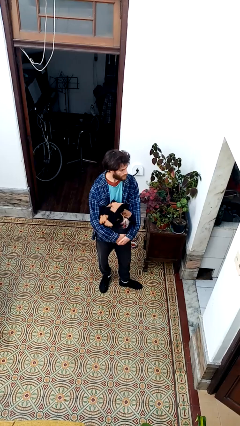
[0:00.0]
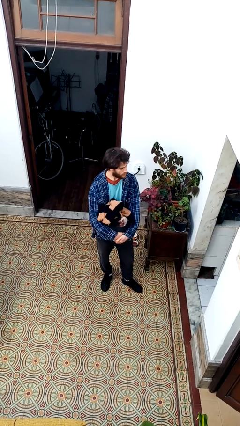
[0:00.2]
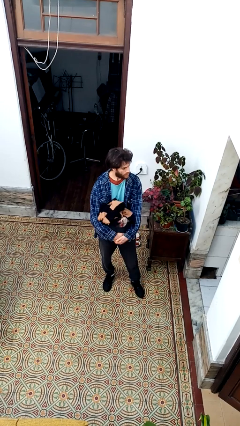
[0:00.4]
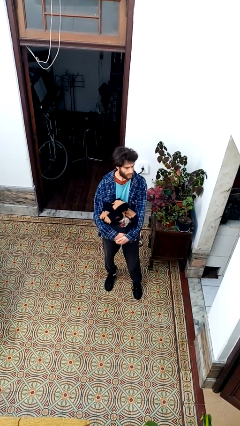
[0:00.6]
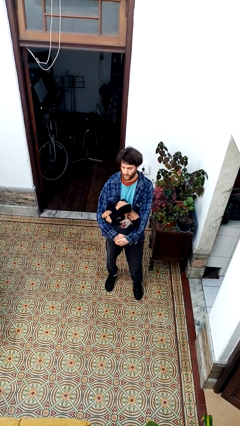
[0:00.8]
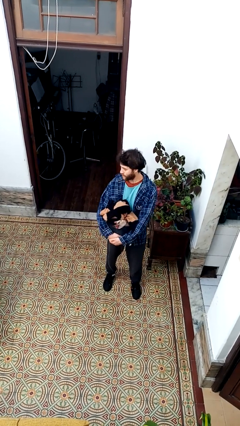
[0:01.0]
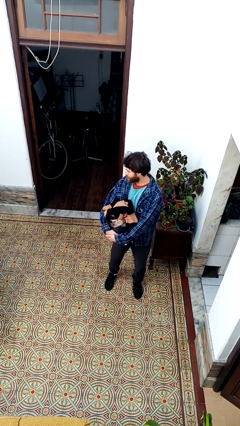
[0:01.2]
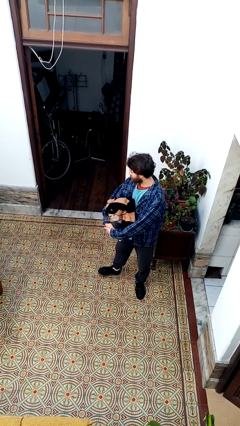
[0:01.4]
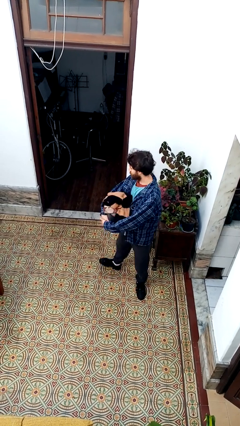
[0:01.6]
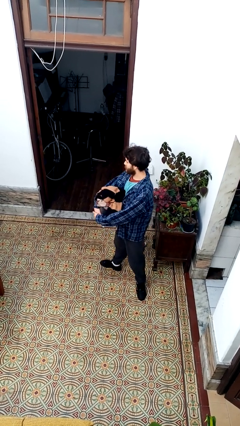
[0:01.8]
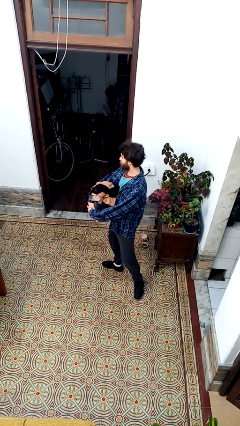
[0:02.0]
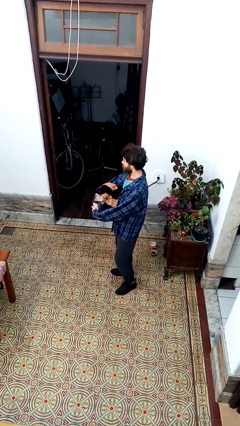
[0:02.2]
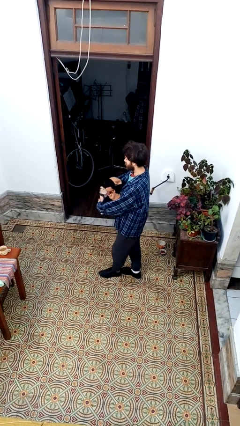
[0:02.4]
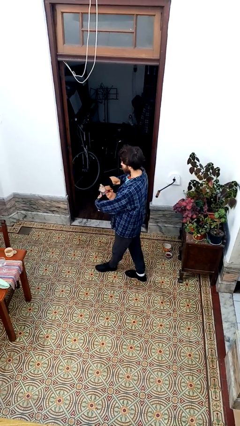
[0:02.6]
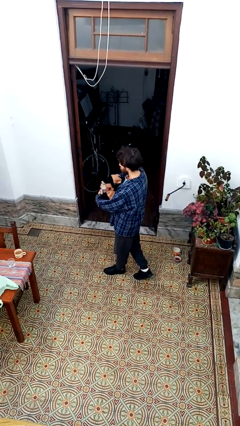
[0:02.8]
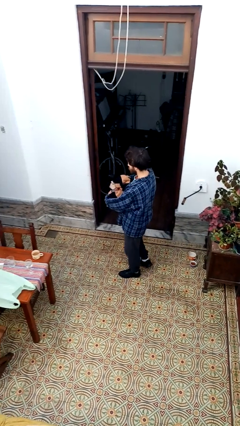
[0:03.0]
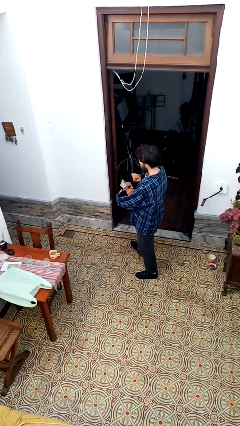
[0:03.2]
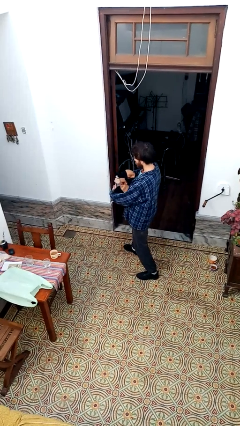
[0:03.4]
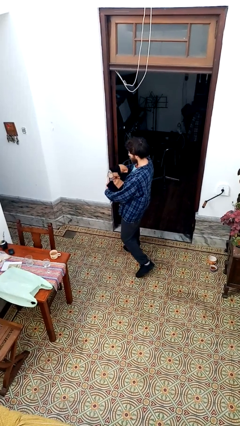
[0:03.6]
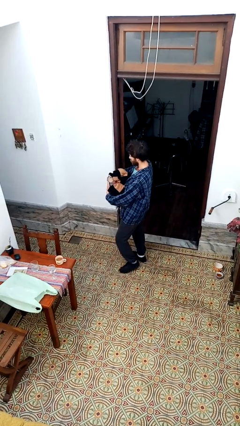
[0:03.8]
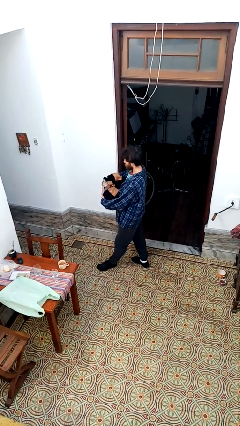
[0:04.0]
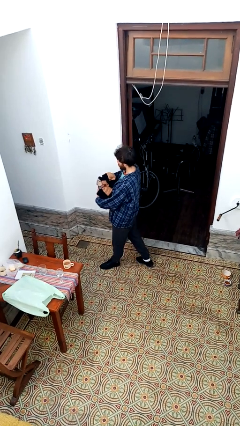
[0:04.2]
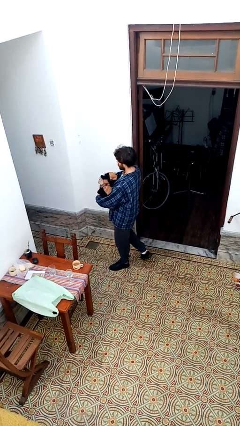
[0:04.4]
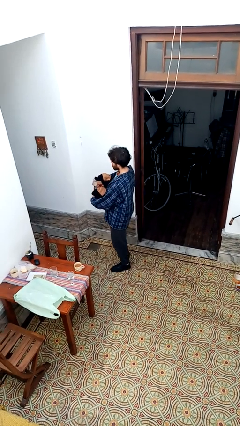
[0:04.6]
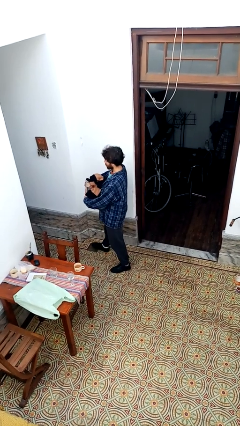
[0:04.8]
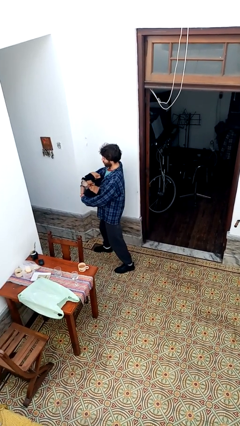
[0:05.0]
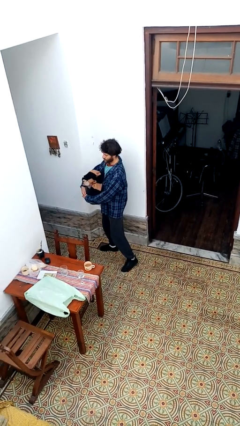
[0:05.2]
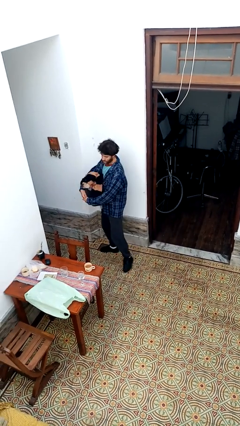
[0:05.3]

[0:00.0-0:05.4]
person carries laundry basket

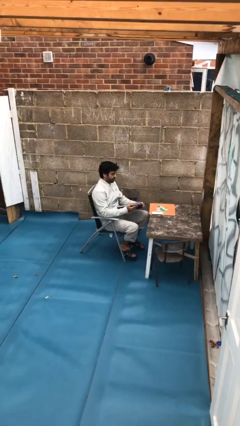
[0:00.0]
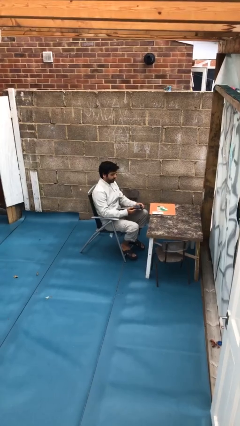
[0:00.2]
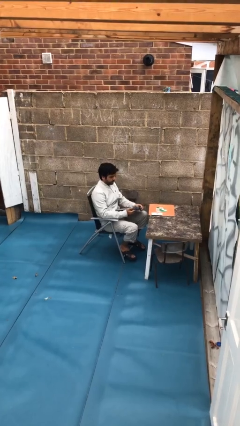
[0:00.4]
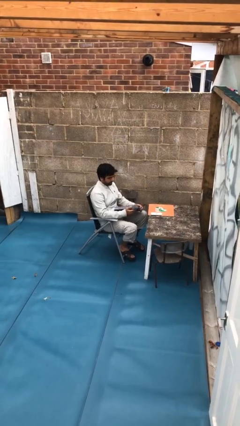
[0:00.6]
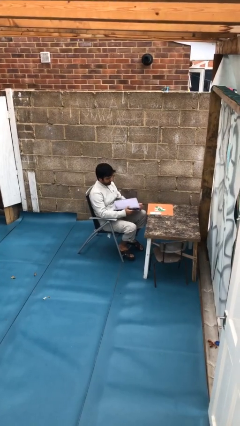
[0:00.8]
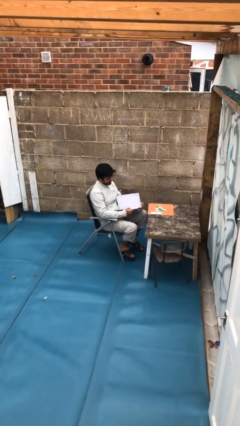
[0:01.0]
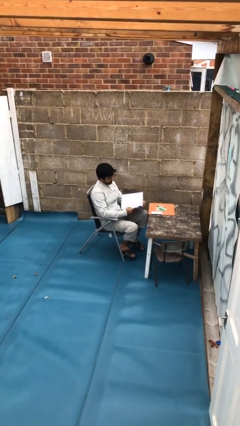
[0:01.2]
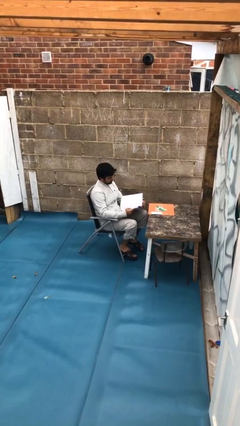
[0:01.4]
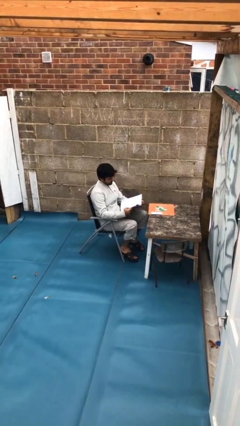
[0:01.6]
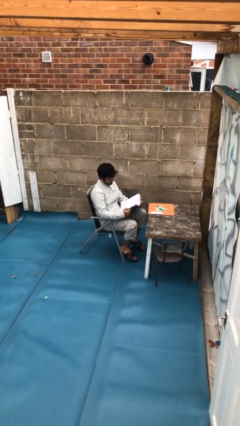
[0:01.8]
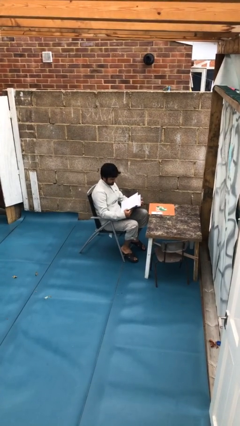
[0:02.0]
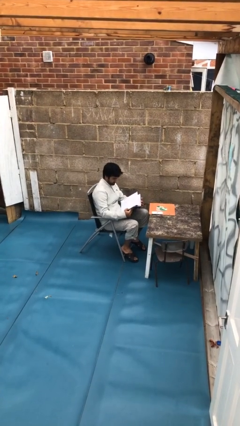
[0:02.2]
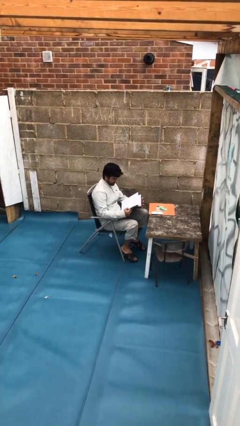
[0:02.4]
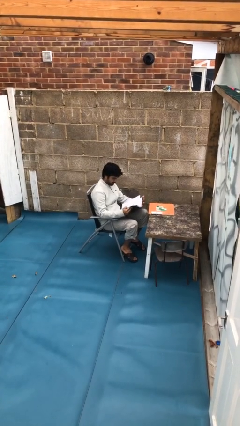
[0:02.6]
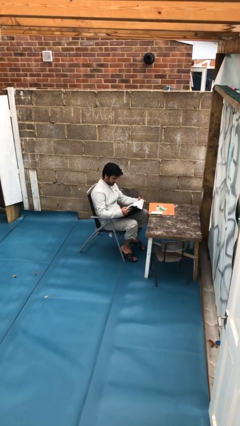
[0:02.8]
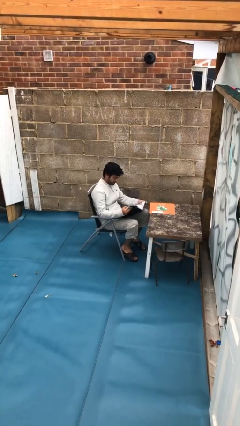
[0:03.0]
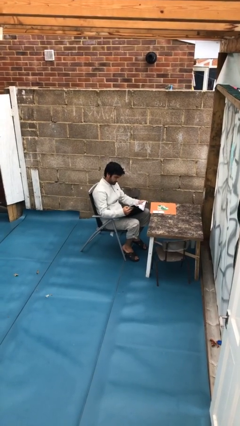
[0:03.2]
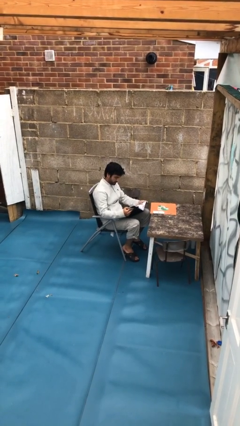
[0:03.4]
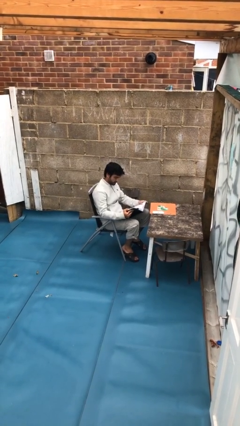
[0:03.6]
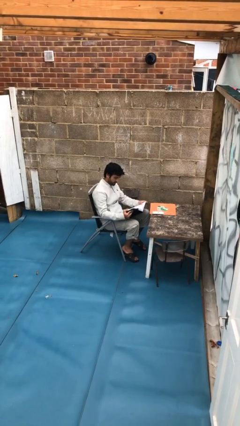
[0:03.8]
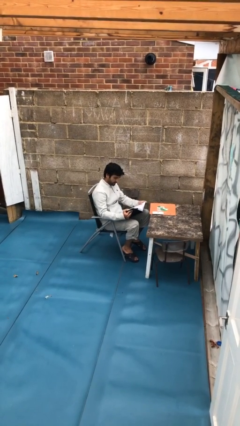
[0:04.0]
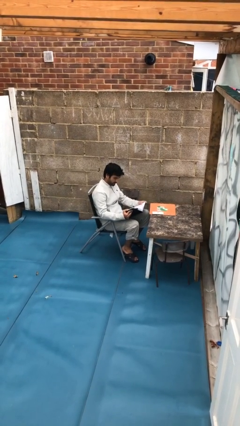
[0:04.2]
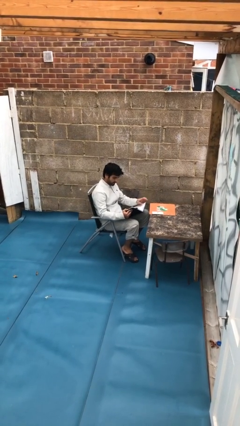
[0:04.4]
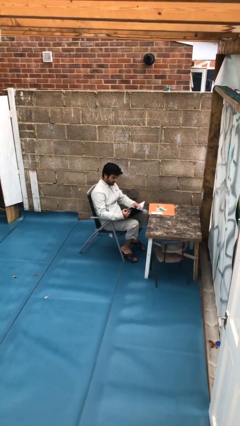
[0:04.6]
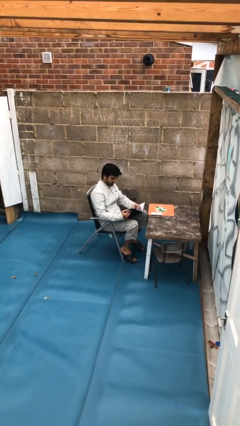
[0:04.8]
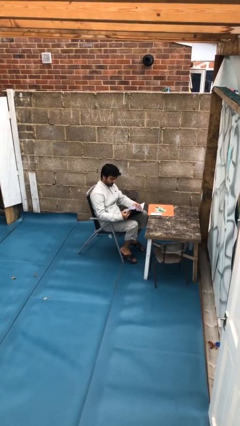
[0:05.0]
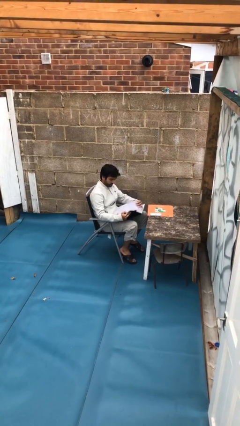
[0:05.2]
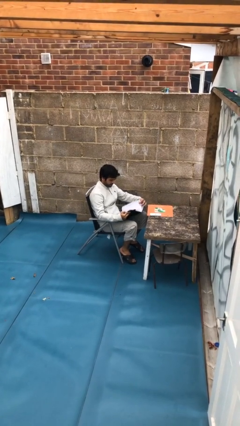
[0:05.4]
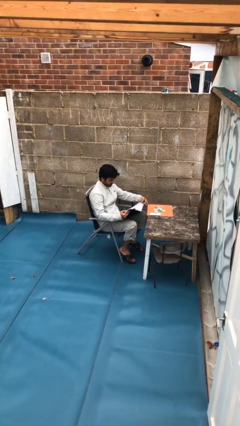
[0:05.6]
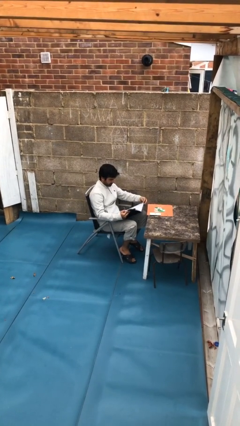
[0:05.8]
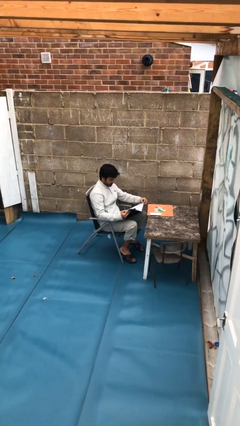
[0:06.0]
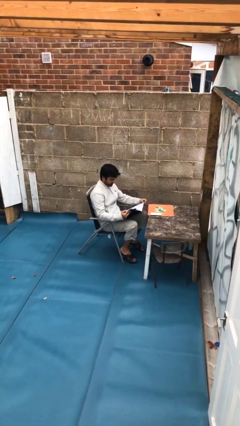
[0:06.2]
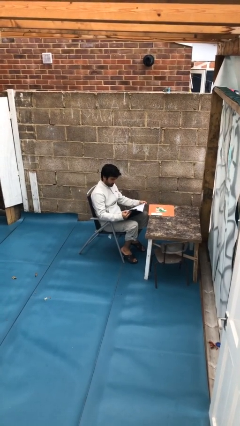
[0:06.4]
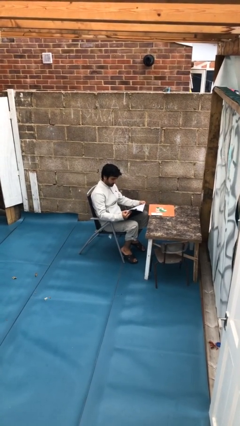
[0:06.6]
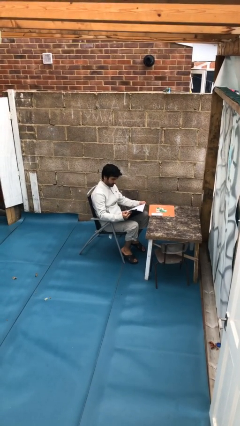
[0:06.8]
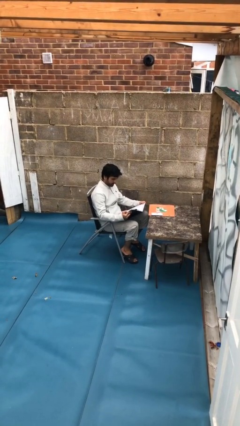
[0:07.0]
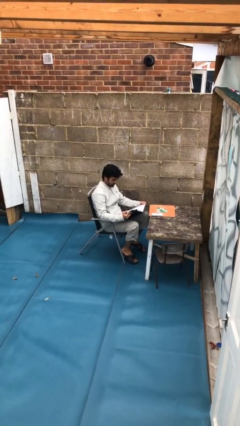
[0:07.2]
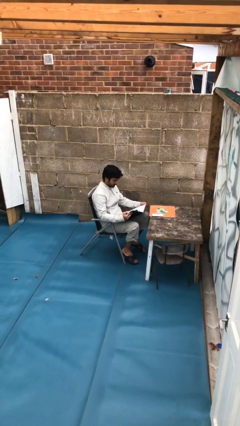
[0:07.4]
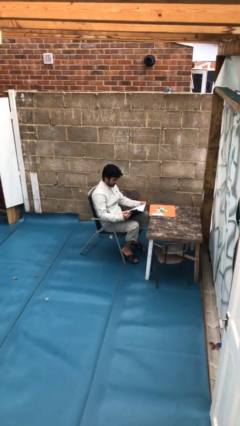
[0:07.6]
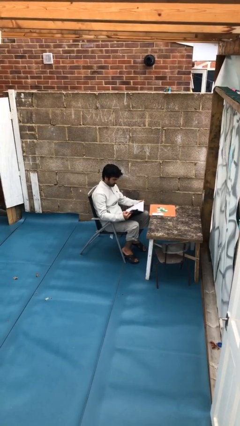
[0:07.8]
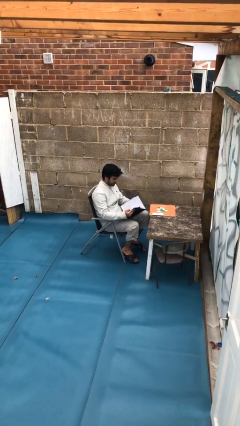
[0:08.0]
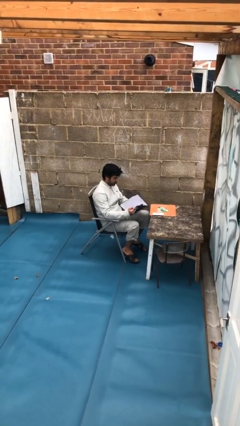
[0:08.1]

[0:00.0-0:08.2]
person reads document

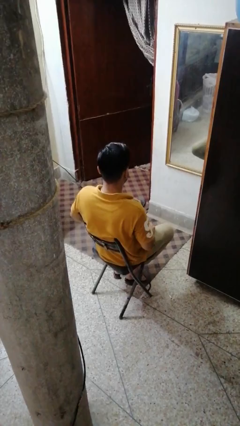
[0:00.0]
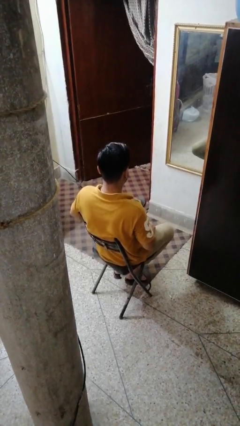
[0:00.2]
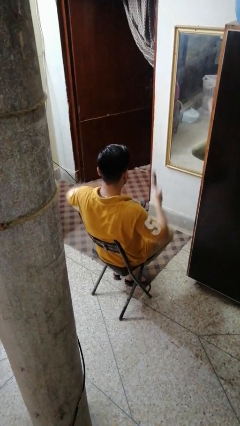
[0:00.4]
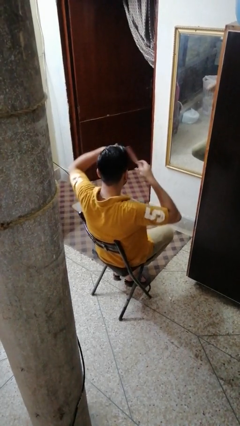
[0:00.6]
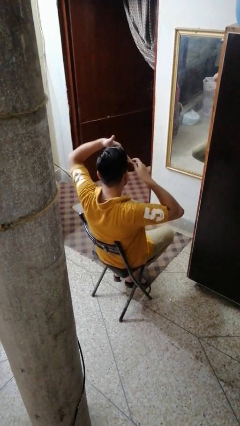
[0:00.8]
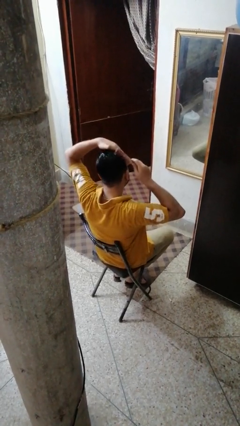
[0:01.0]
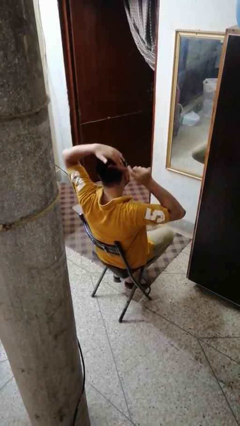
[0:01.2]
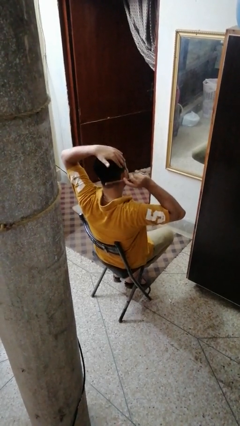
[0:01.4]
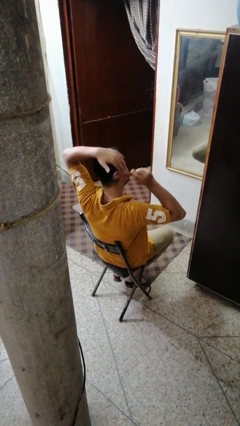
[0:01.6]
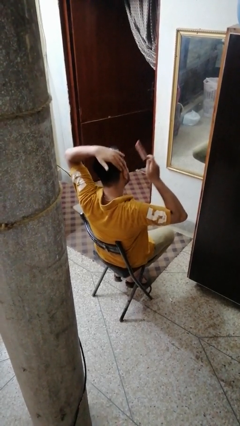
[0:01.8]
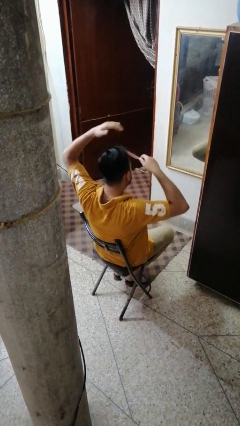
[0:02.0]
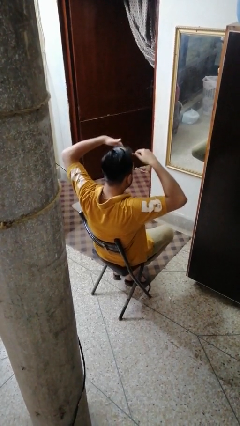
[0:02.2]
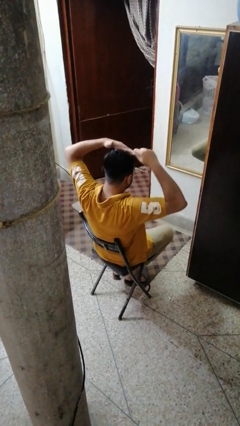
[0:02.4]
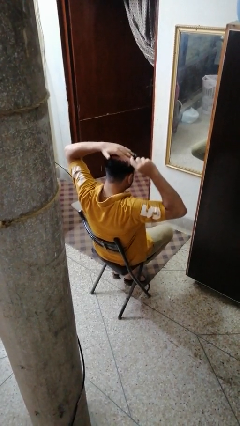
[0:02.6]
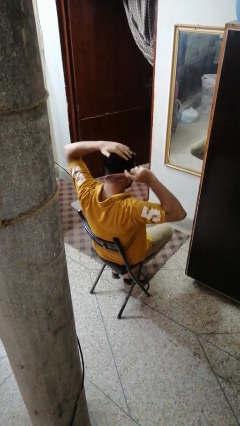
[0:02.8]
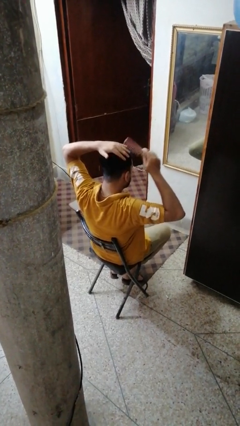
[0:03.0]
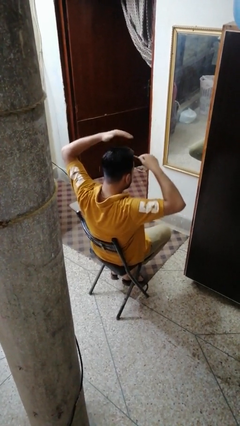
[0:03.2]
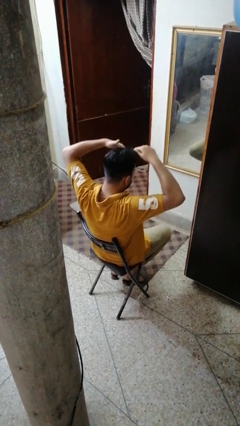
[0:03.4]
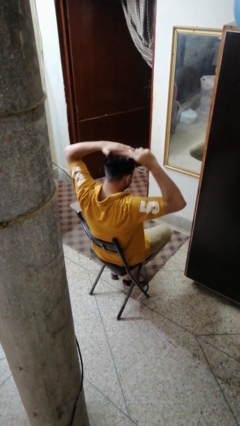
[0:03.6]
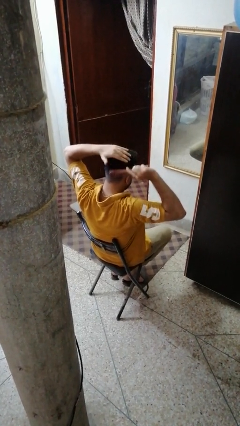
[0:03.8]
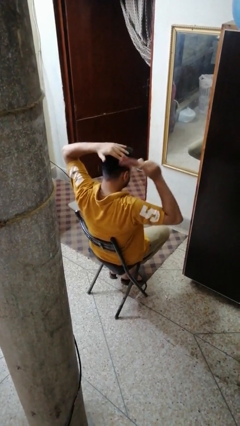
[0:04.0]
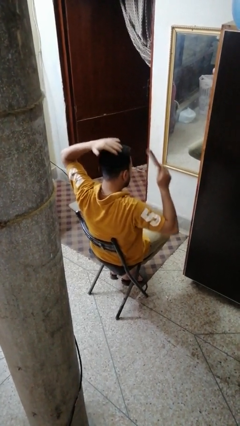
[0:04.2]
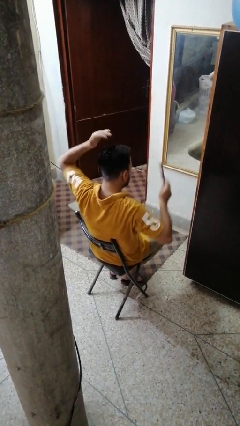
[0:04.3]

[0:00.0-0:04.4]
person brushes hair
